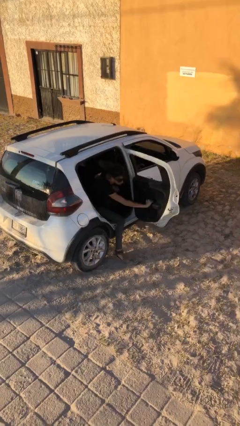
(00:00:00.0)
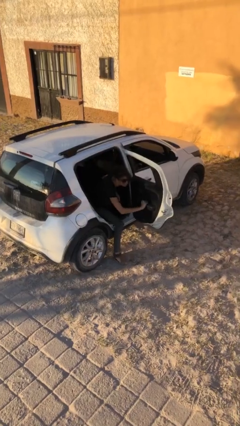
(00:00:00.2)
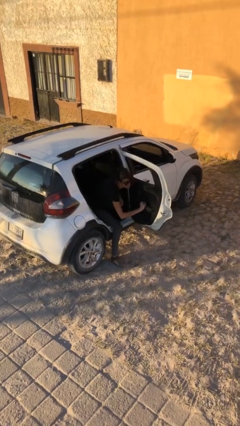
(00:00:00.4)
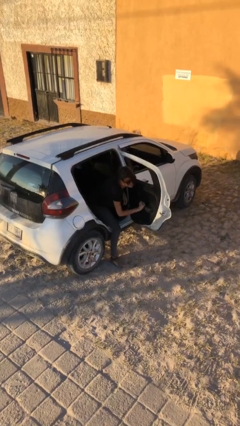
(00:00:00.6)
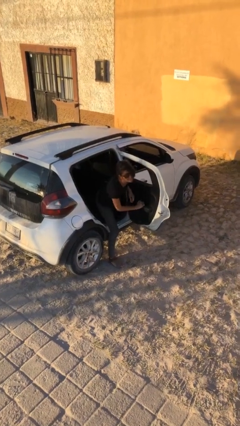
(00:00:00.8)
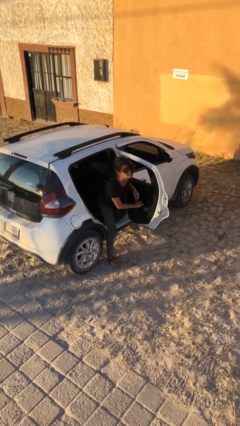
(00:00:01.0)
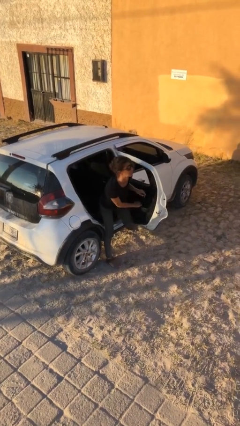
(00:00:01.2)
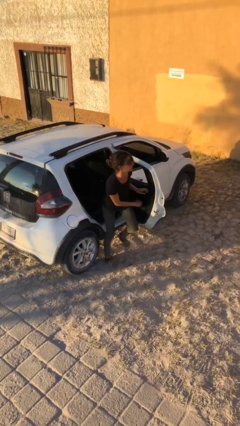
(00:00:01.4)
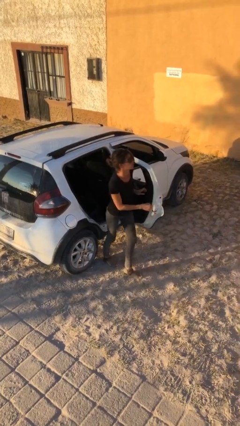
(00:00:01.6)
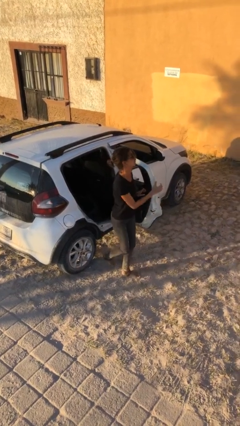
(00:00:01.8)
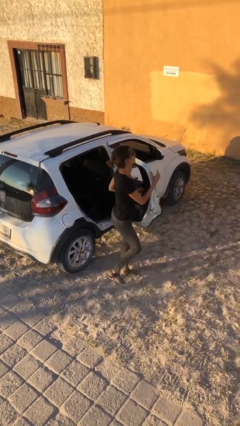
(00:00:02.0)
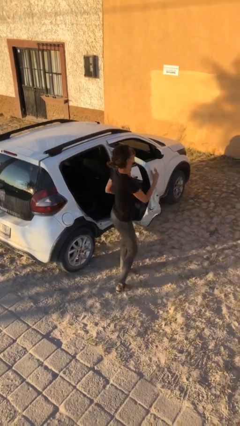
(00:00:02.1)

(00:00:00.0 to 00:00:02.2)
person exits car

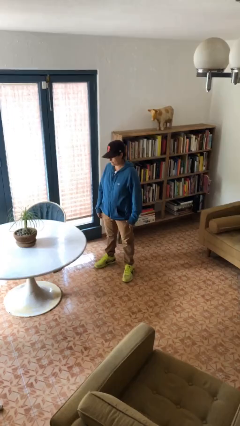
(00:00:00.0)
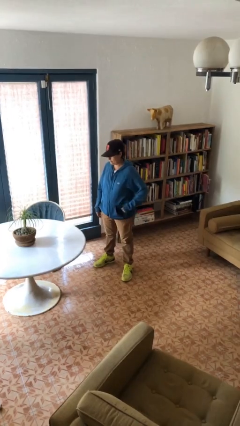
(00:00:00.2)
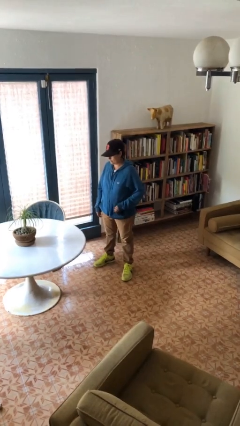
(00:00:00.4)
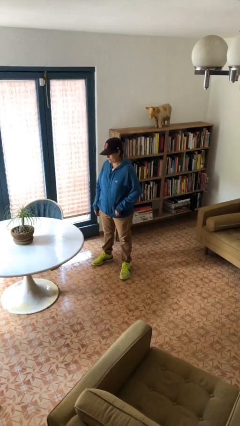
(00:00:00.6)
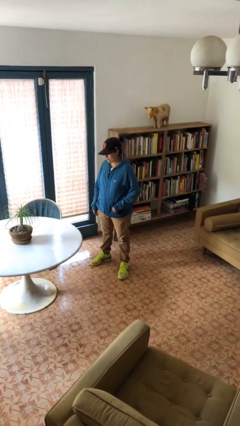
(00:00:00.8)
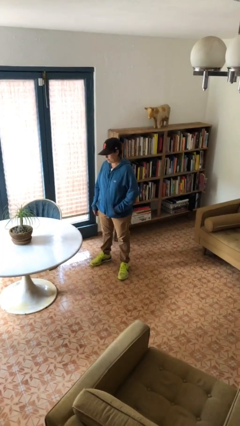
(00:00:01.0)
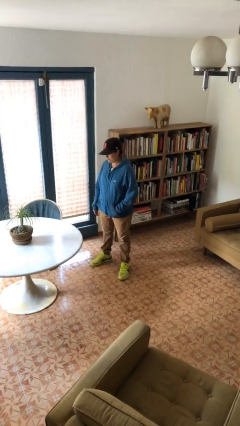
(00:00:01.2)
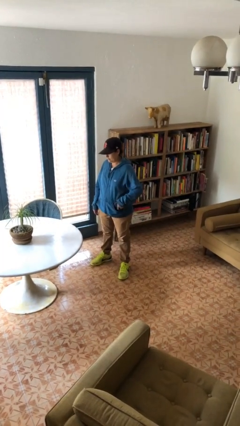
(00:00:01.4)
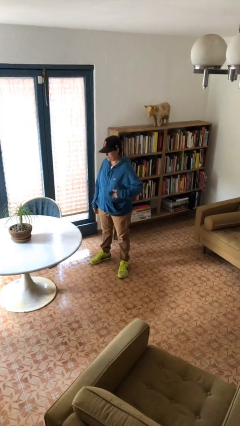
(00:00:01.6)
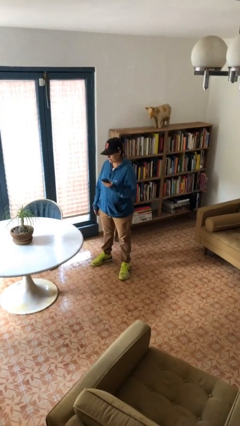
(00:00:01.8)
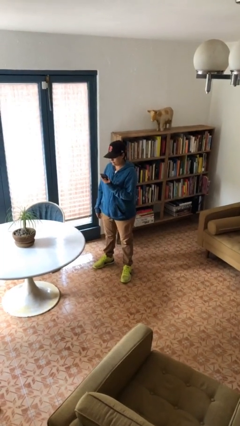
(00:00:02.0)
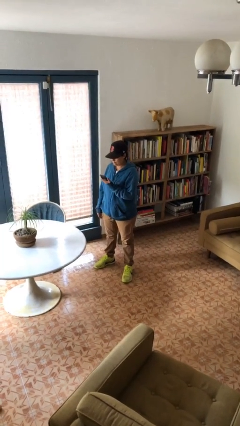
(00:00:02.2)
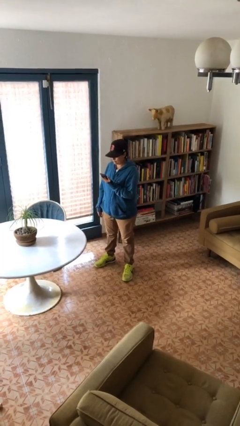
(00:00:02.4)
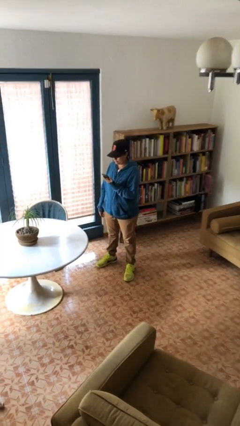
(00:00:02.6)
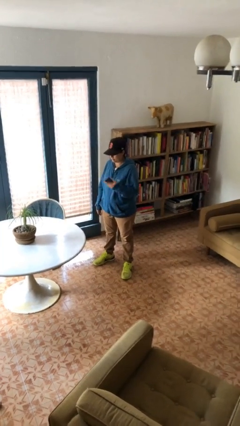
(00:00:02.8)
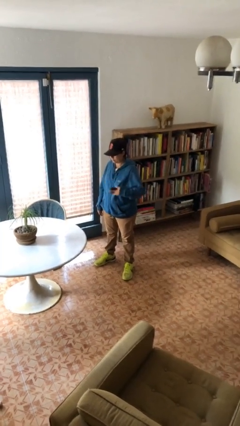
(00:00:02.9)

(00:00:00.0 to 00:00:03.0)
person takes phone from pocket

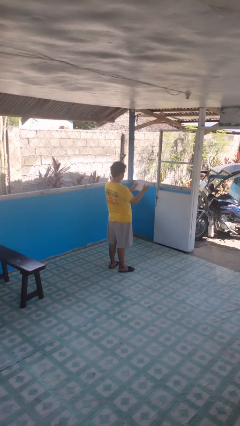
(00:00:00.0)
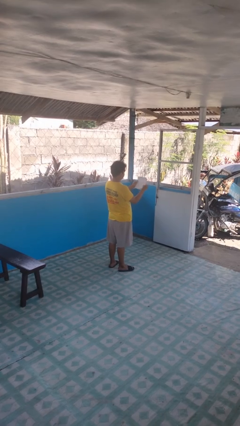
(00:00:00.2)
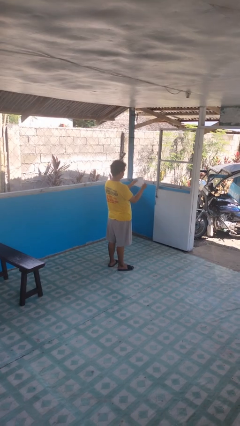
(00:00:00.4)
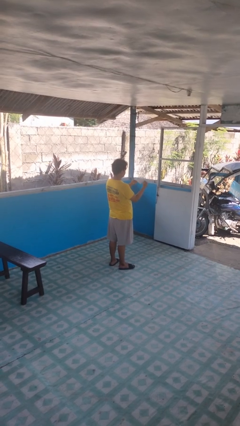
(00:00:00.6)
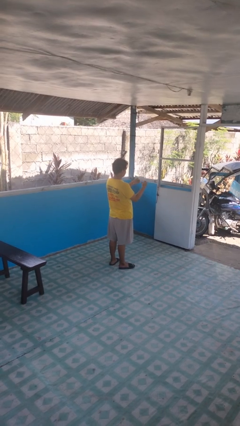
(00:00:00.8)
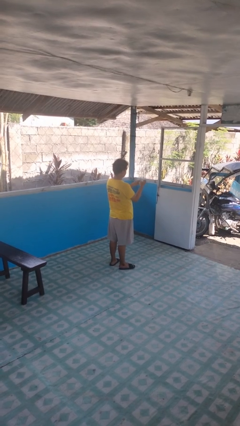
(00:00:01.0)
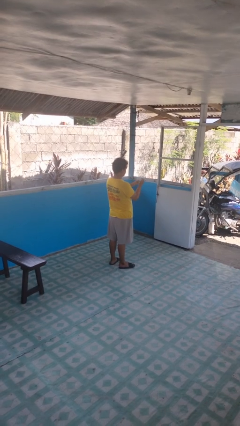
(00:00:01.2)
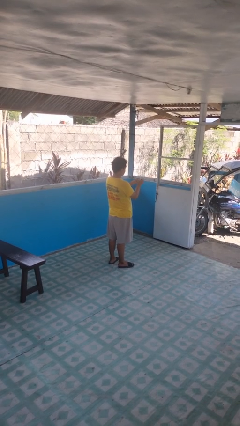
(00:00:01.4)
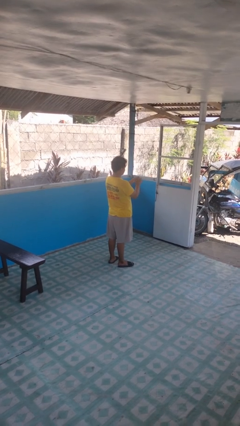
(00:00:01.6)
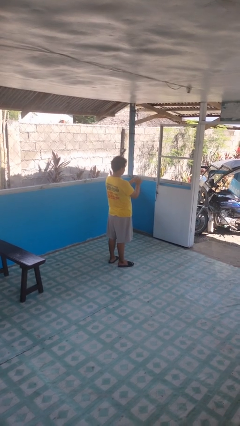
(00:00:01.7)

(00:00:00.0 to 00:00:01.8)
person crumples paper

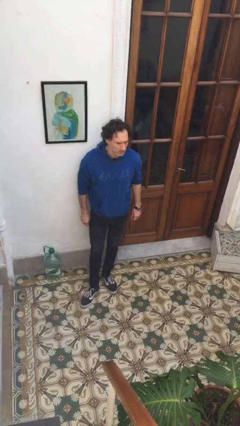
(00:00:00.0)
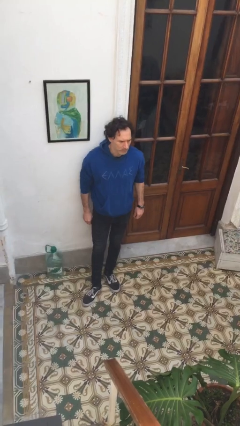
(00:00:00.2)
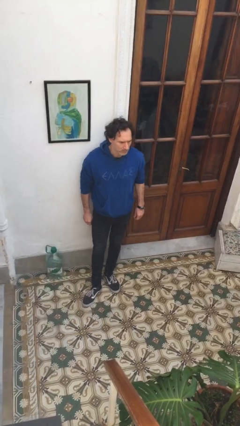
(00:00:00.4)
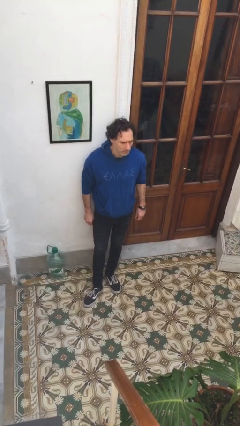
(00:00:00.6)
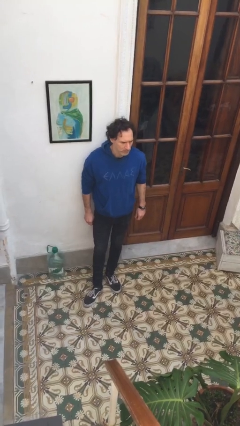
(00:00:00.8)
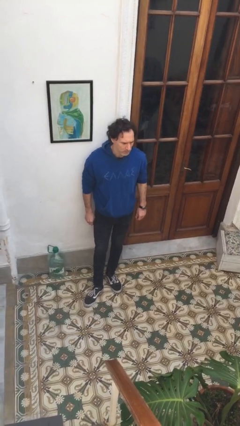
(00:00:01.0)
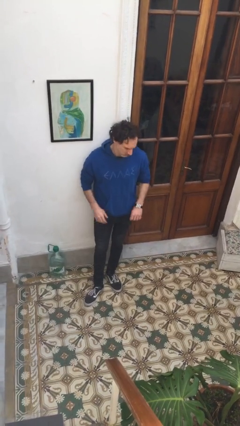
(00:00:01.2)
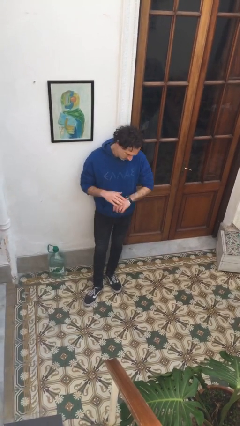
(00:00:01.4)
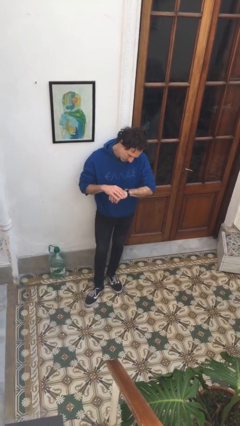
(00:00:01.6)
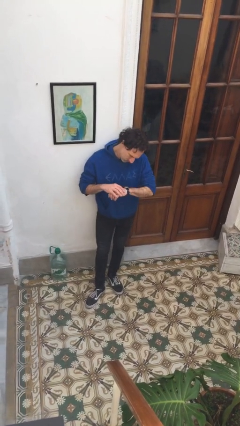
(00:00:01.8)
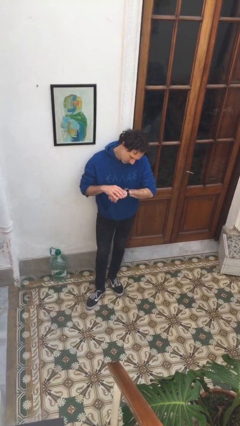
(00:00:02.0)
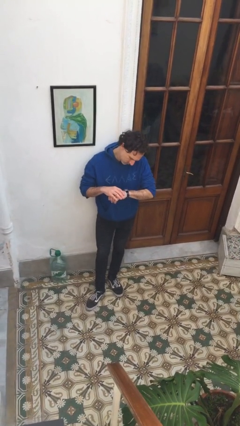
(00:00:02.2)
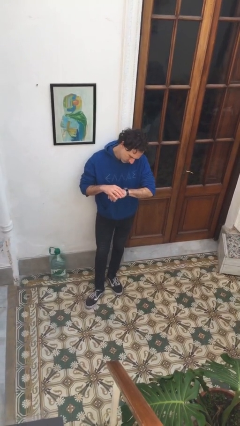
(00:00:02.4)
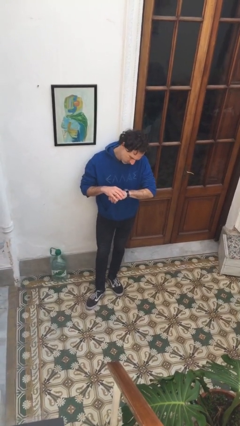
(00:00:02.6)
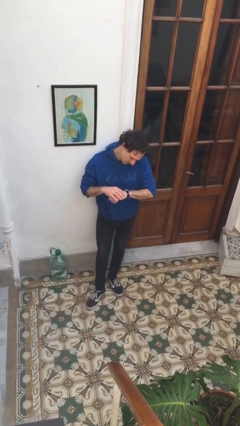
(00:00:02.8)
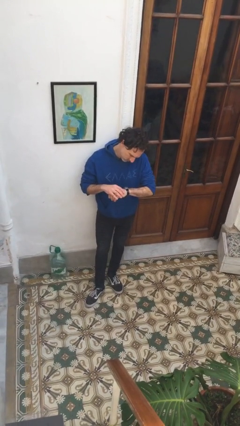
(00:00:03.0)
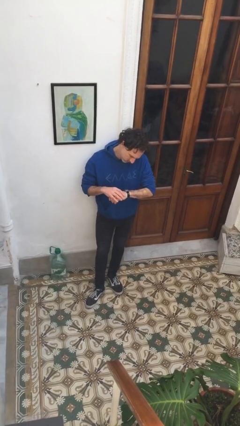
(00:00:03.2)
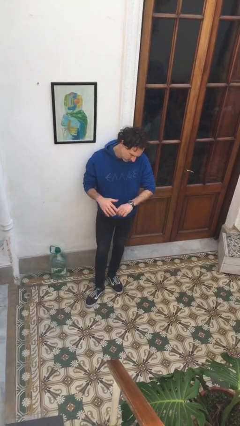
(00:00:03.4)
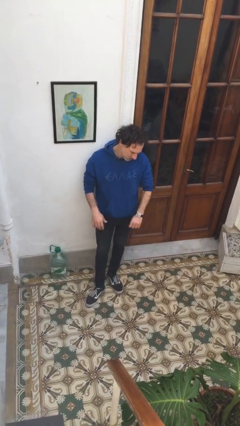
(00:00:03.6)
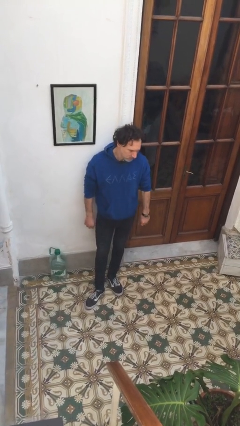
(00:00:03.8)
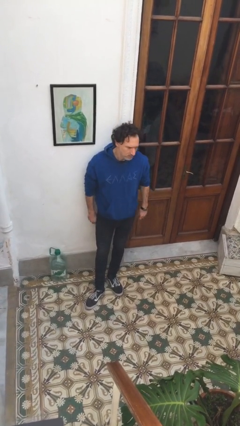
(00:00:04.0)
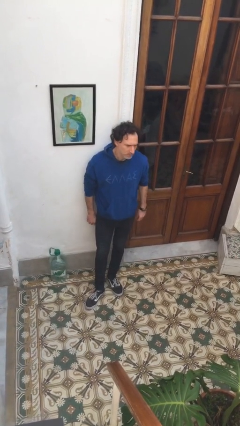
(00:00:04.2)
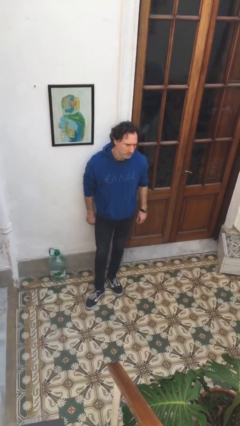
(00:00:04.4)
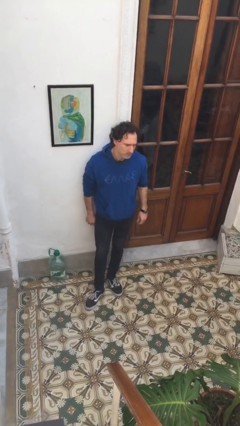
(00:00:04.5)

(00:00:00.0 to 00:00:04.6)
person looks at wristwatch

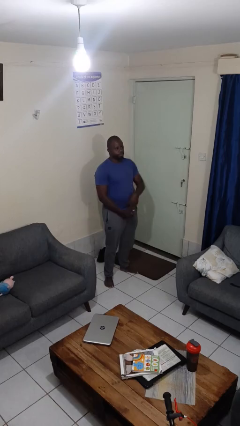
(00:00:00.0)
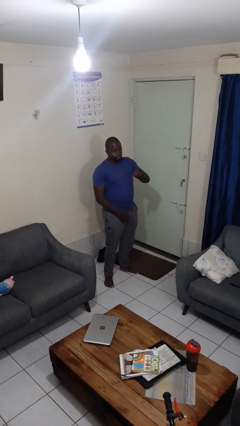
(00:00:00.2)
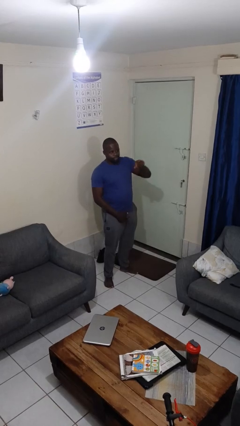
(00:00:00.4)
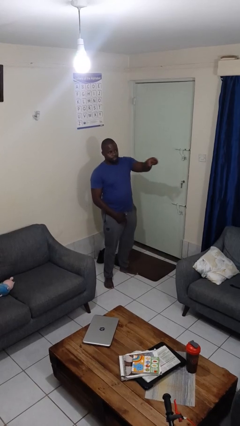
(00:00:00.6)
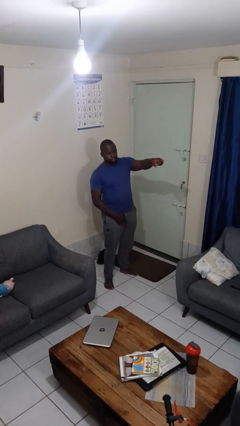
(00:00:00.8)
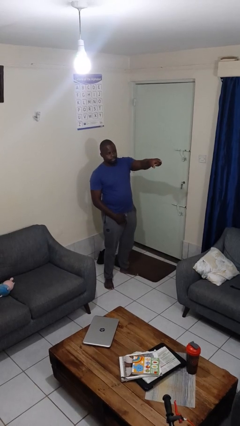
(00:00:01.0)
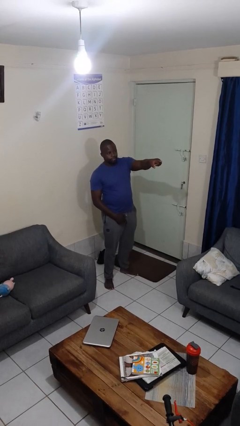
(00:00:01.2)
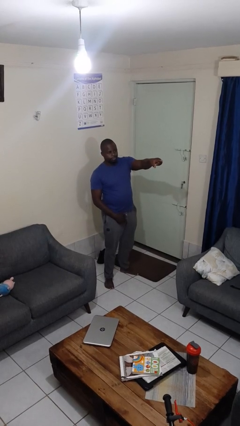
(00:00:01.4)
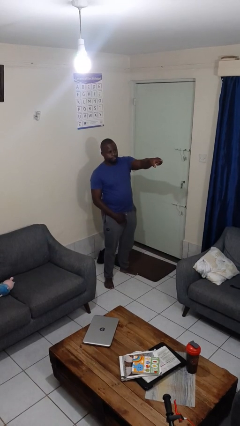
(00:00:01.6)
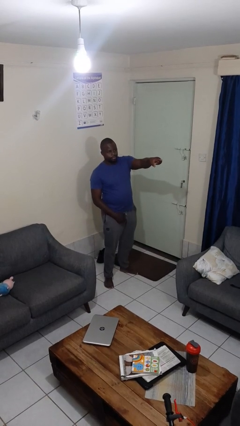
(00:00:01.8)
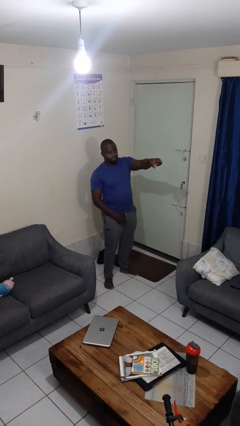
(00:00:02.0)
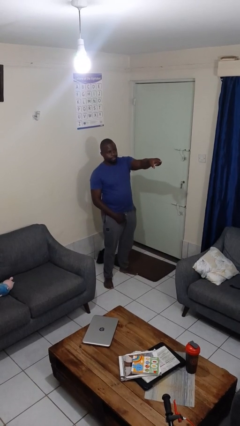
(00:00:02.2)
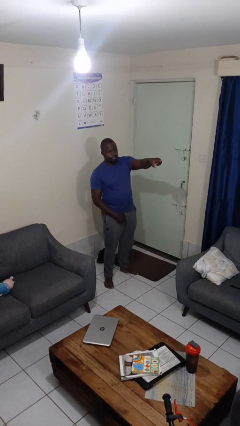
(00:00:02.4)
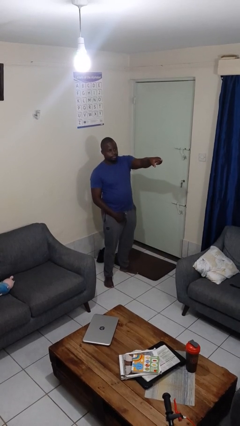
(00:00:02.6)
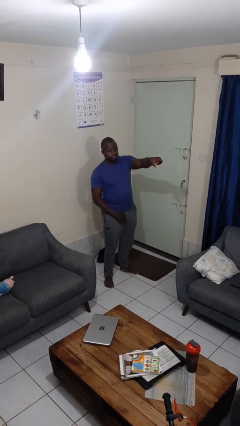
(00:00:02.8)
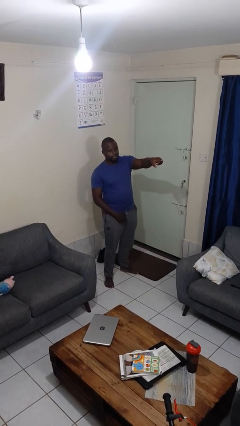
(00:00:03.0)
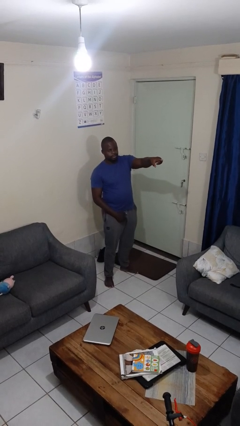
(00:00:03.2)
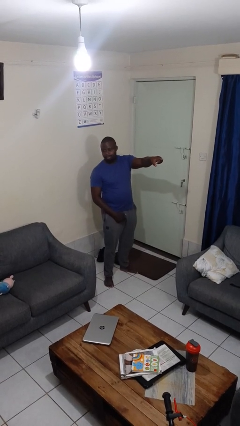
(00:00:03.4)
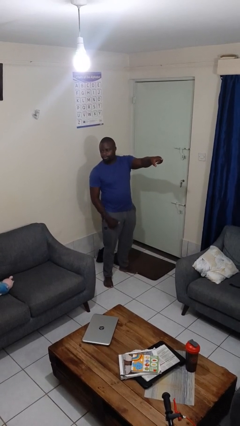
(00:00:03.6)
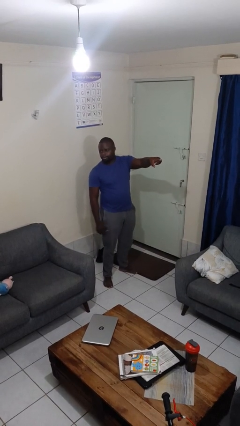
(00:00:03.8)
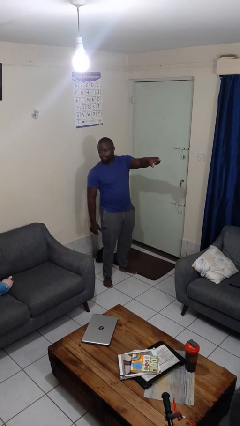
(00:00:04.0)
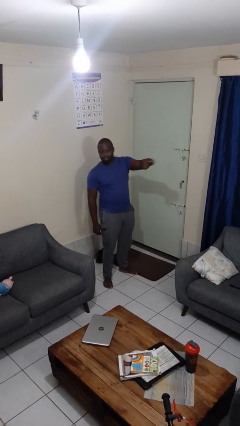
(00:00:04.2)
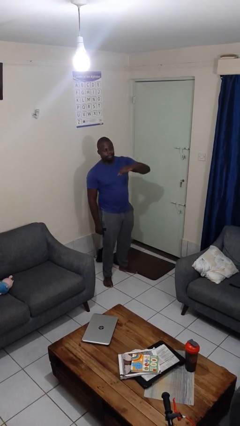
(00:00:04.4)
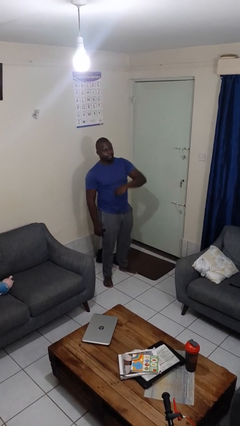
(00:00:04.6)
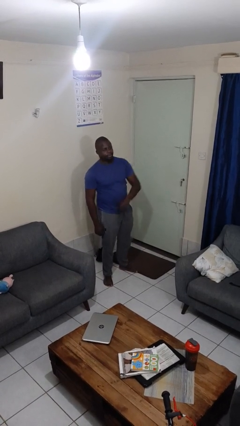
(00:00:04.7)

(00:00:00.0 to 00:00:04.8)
person points at person

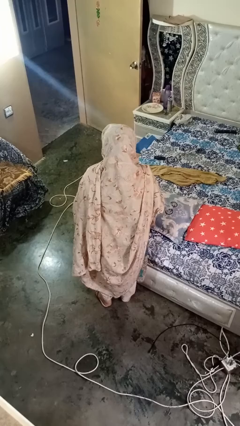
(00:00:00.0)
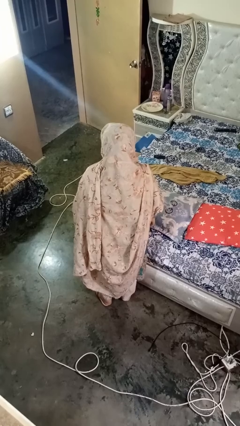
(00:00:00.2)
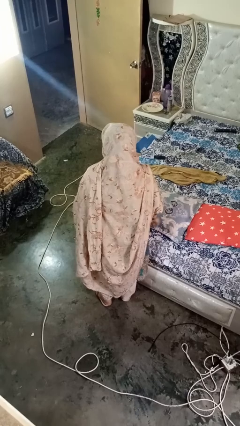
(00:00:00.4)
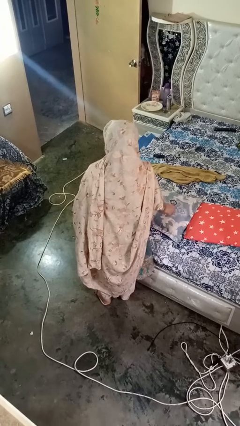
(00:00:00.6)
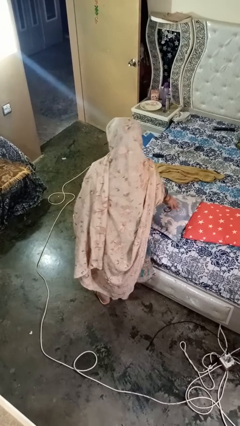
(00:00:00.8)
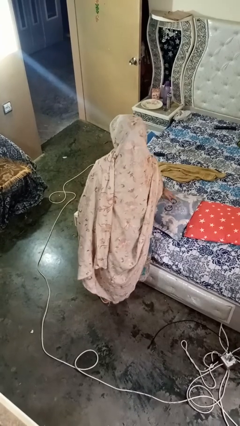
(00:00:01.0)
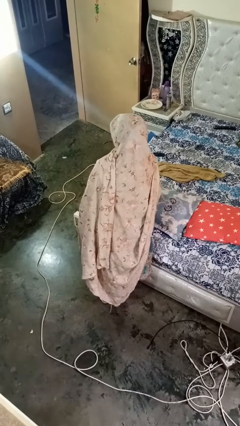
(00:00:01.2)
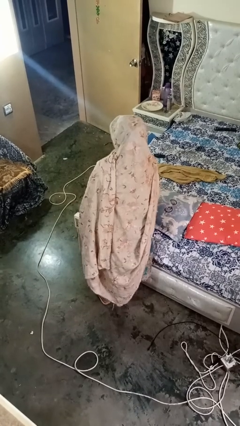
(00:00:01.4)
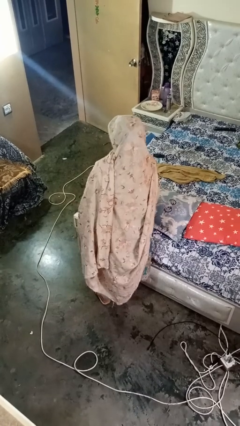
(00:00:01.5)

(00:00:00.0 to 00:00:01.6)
person taps object with finger
